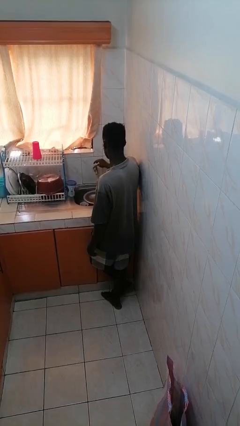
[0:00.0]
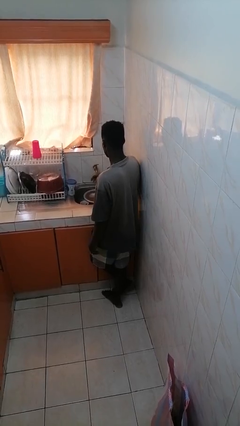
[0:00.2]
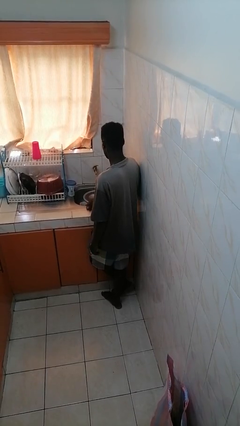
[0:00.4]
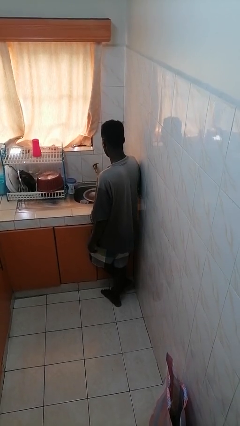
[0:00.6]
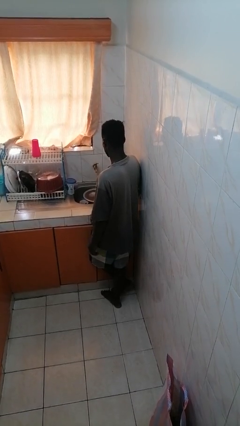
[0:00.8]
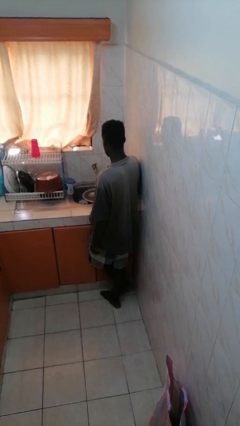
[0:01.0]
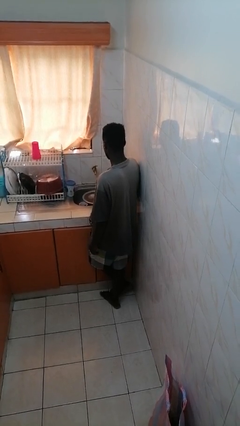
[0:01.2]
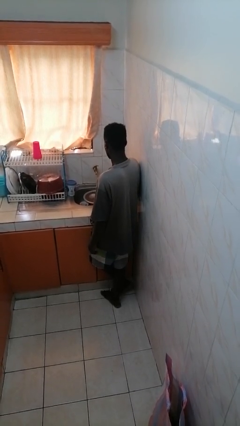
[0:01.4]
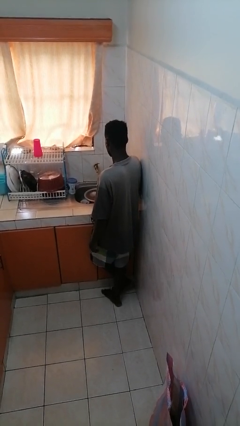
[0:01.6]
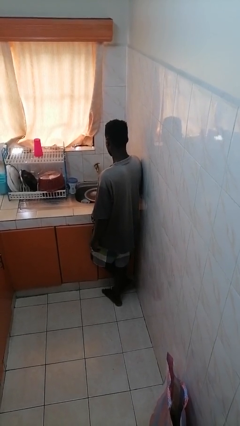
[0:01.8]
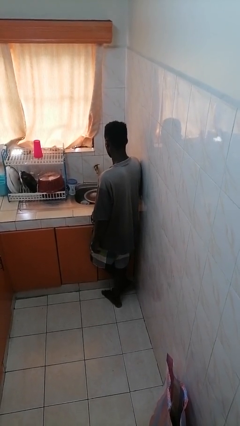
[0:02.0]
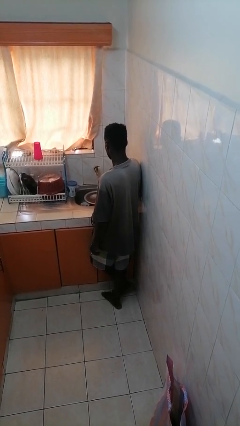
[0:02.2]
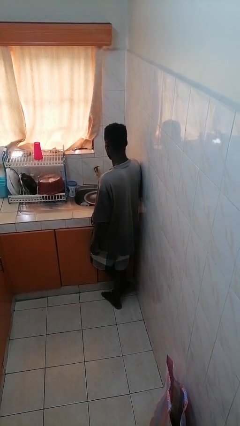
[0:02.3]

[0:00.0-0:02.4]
person turns on faucet

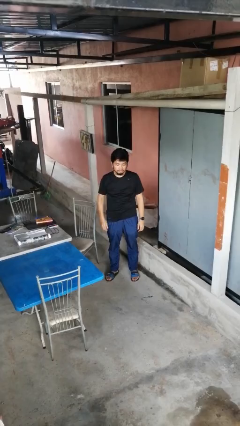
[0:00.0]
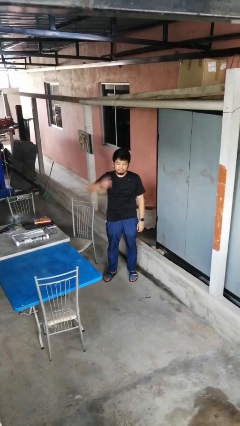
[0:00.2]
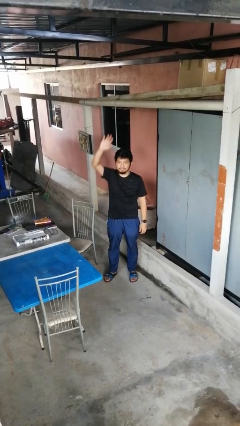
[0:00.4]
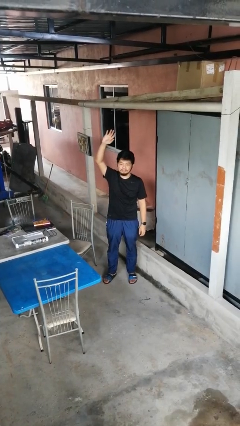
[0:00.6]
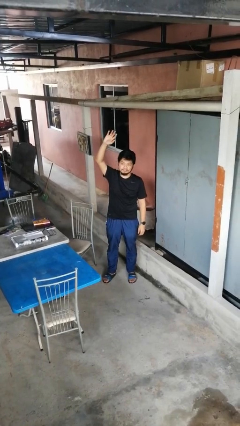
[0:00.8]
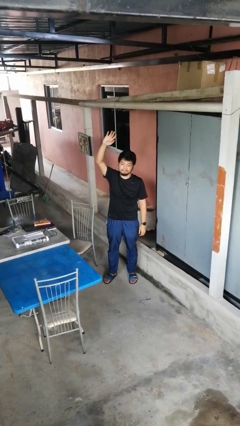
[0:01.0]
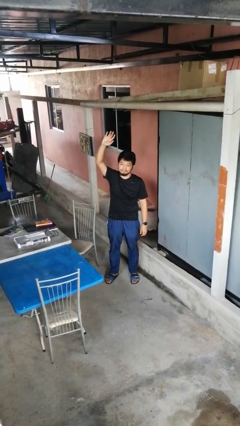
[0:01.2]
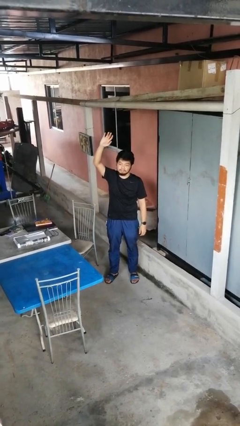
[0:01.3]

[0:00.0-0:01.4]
person gestures raise hand

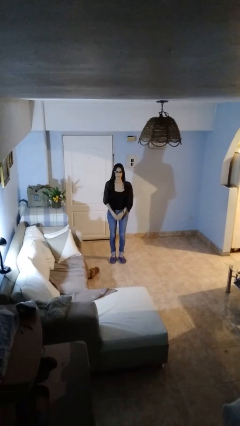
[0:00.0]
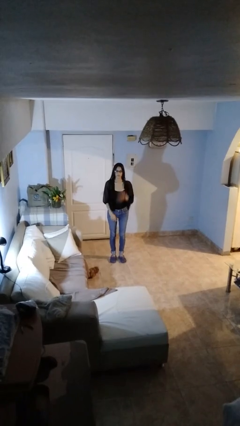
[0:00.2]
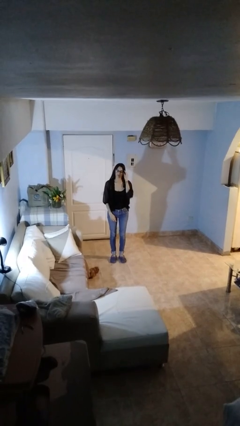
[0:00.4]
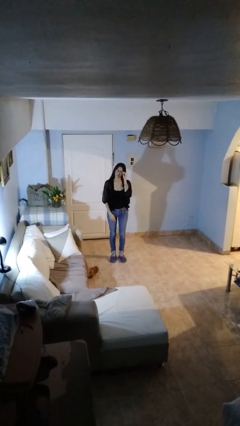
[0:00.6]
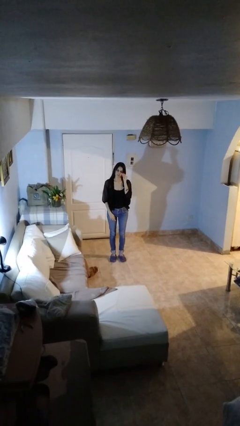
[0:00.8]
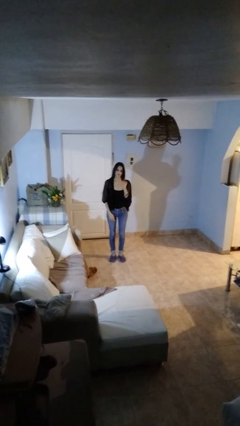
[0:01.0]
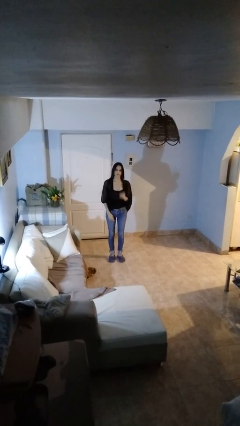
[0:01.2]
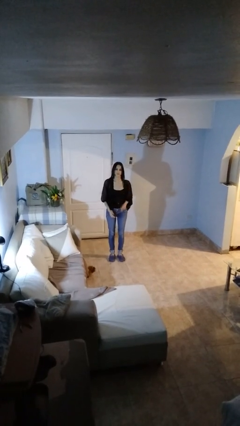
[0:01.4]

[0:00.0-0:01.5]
person takes off glasses

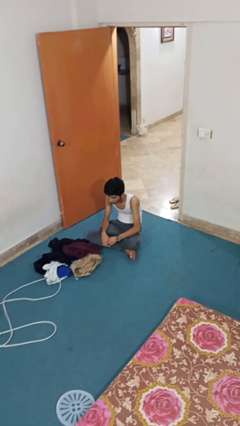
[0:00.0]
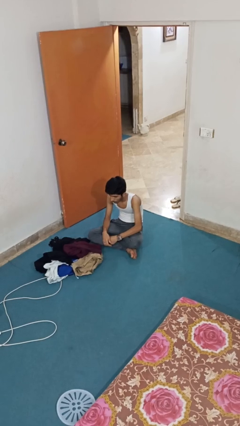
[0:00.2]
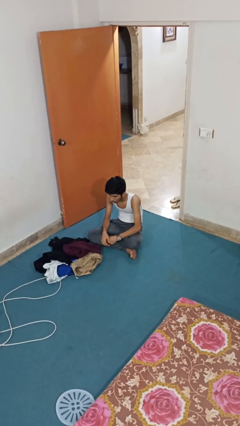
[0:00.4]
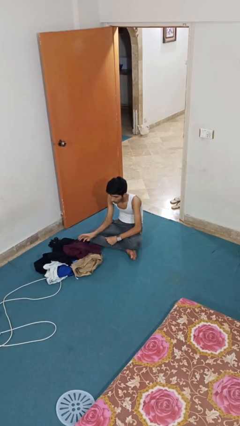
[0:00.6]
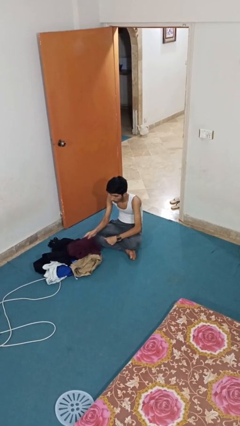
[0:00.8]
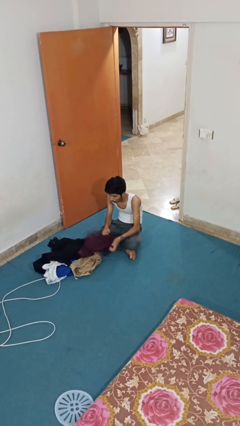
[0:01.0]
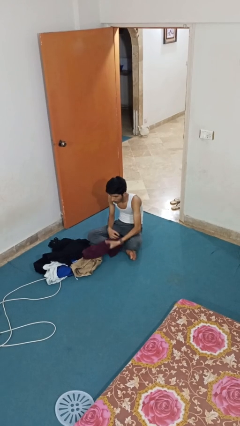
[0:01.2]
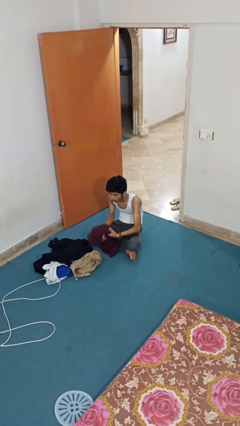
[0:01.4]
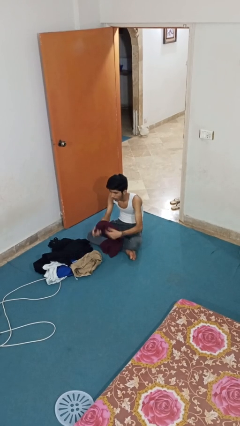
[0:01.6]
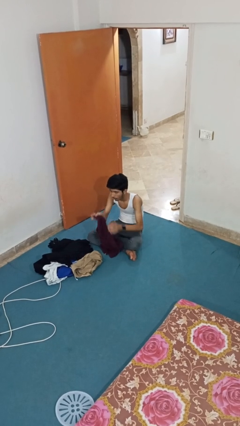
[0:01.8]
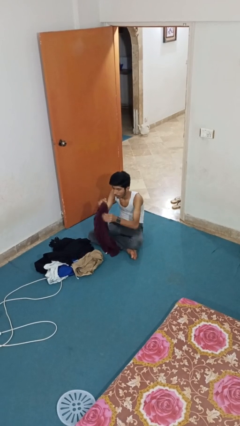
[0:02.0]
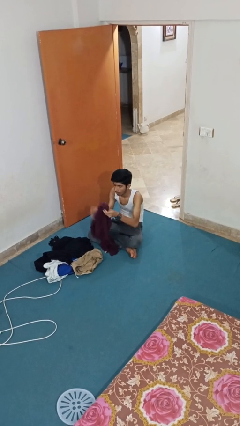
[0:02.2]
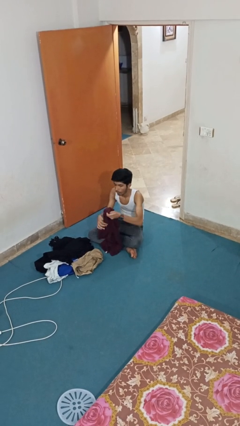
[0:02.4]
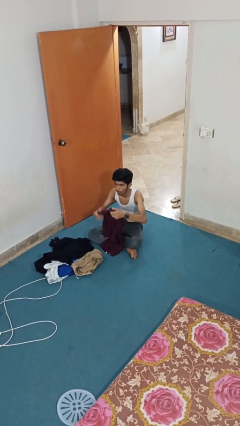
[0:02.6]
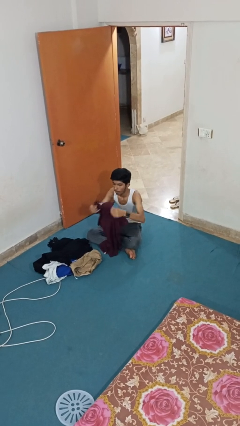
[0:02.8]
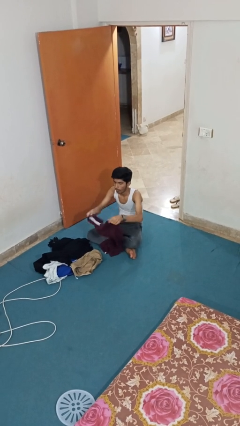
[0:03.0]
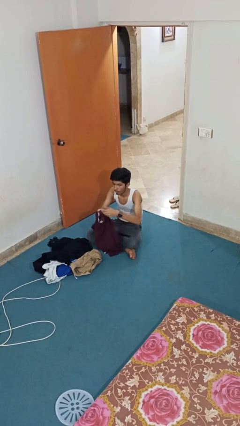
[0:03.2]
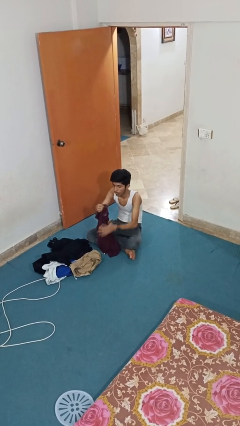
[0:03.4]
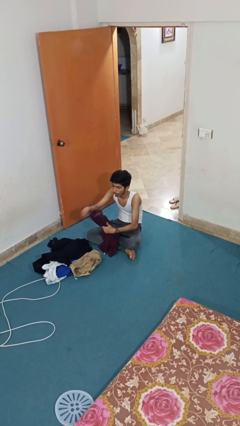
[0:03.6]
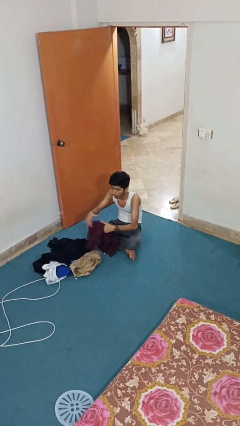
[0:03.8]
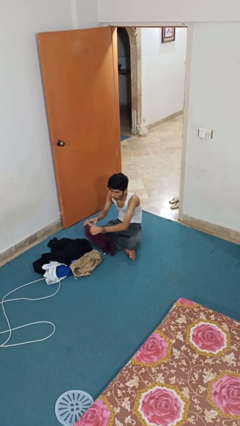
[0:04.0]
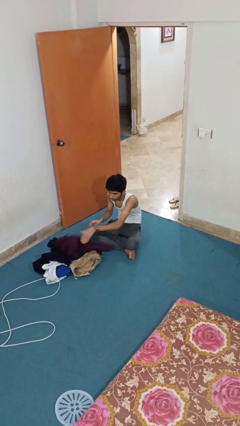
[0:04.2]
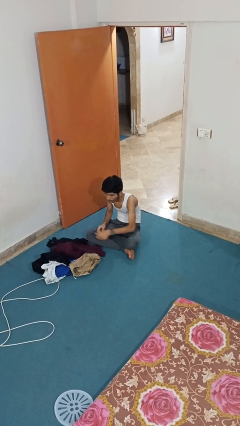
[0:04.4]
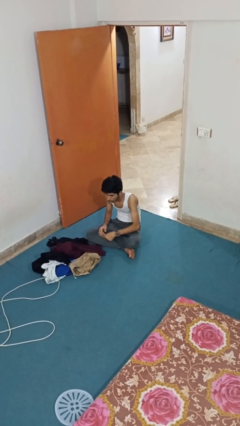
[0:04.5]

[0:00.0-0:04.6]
person folds shirt

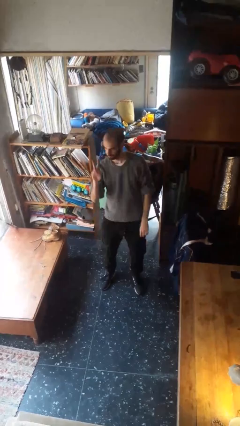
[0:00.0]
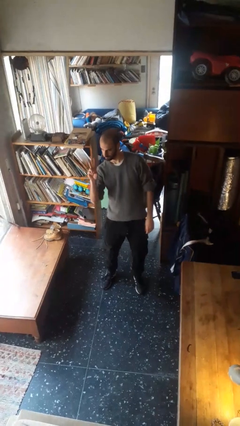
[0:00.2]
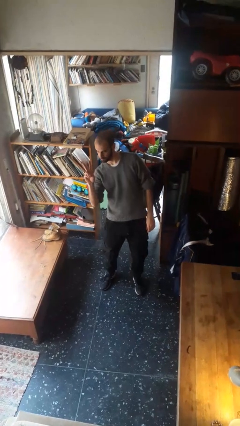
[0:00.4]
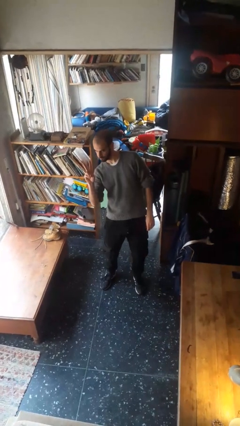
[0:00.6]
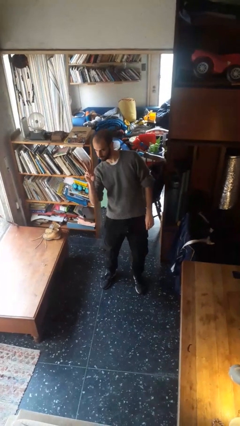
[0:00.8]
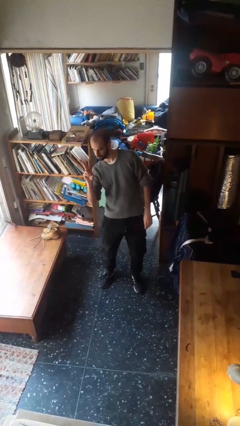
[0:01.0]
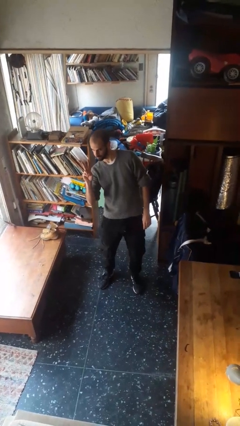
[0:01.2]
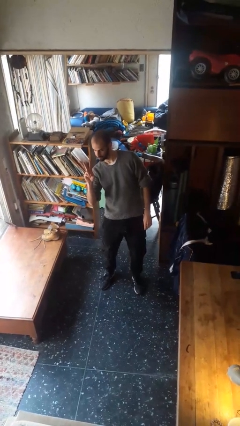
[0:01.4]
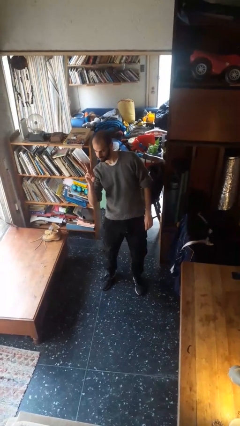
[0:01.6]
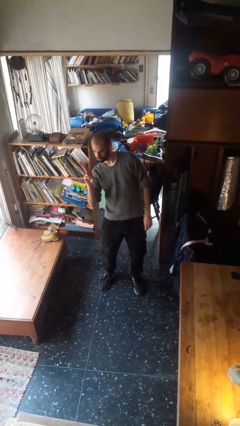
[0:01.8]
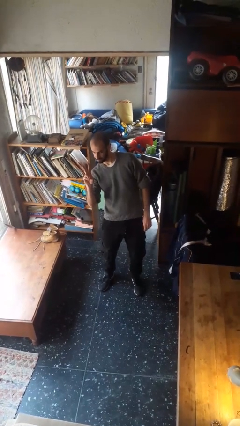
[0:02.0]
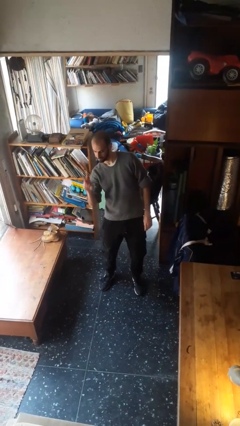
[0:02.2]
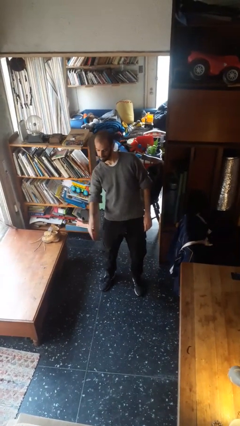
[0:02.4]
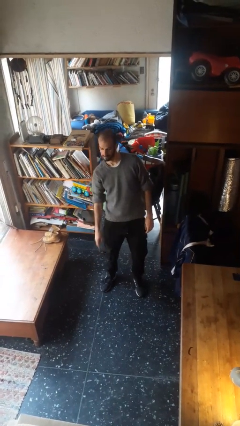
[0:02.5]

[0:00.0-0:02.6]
person gestures peace

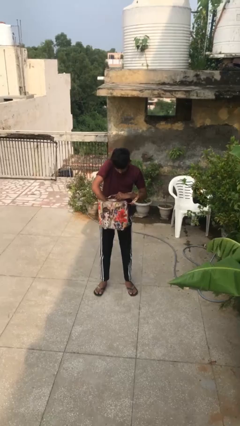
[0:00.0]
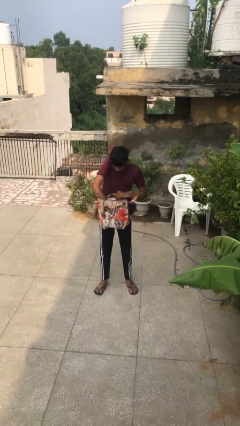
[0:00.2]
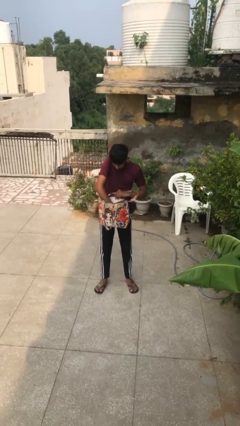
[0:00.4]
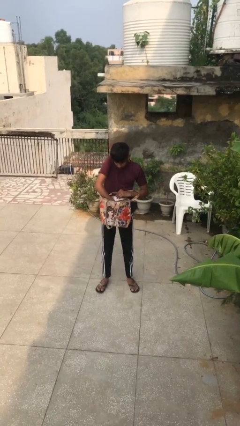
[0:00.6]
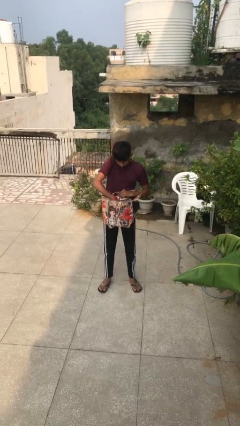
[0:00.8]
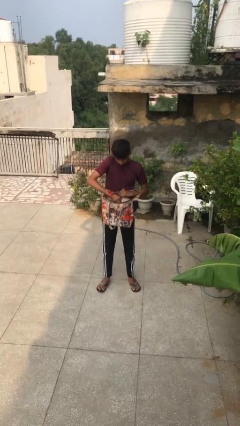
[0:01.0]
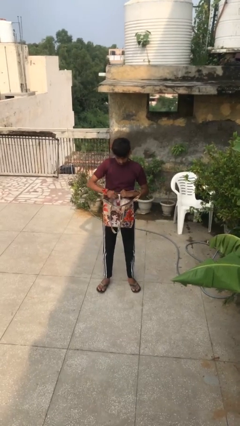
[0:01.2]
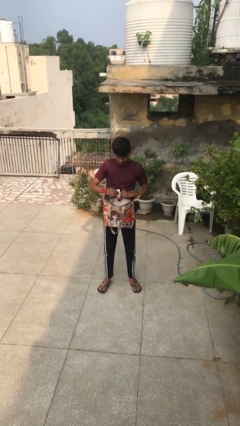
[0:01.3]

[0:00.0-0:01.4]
person searches in purse

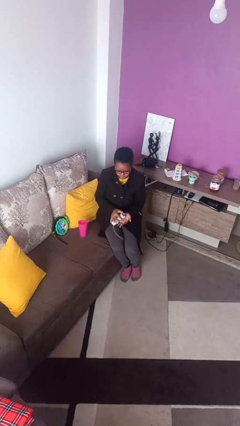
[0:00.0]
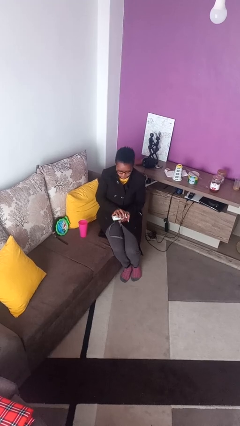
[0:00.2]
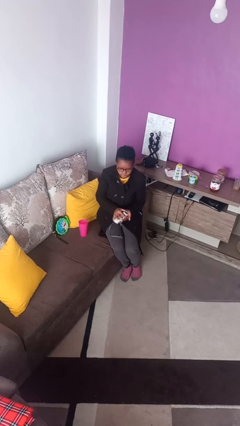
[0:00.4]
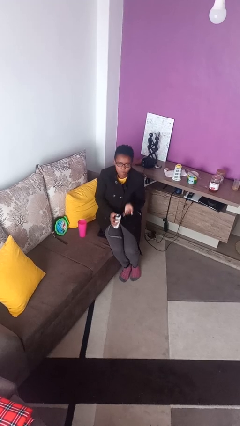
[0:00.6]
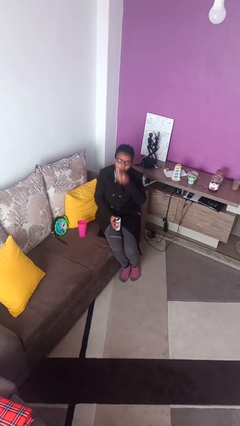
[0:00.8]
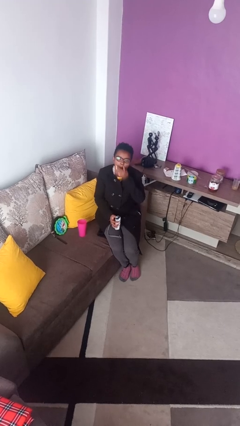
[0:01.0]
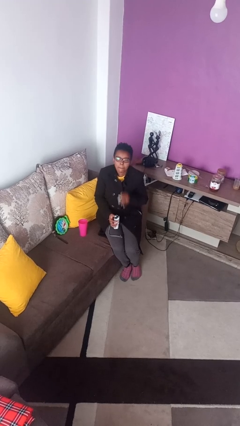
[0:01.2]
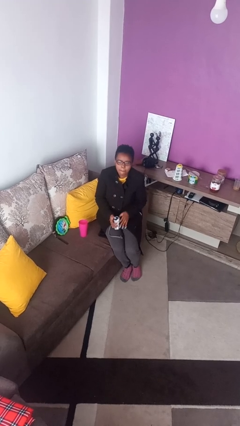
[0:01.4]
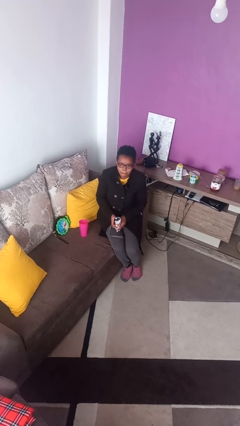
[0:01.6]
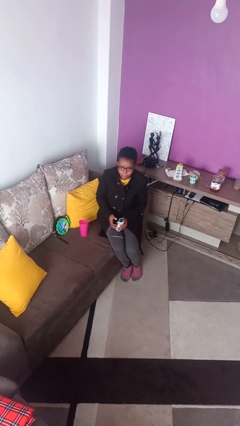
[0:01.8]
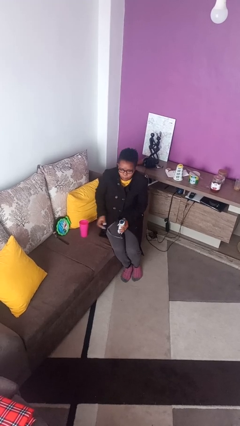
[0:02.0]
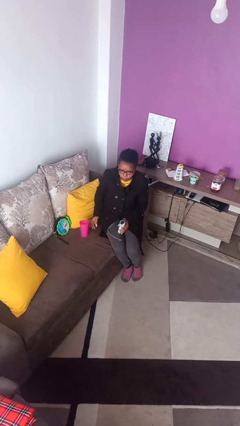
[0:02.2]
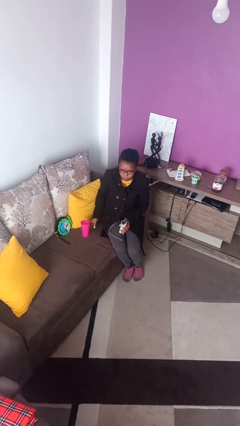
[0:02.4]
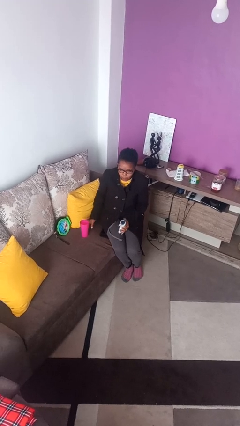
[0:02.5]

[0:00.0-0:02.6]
person takes medicine pills

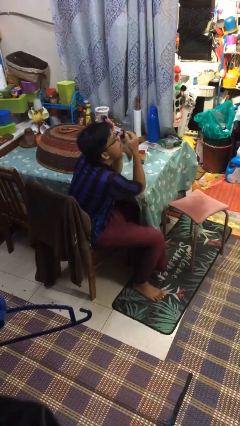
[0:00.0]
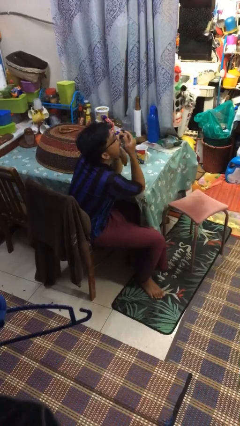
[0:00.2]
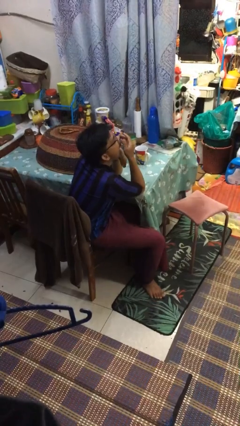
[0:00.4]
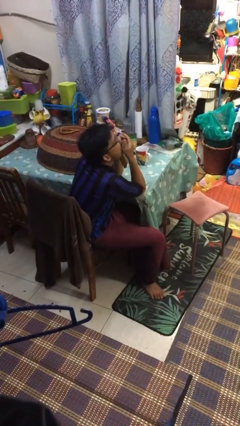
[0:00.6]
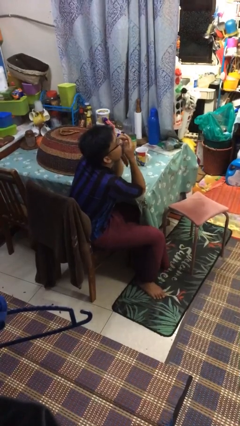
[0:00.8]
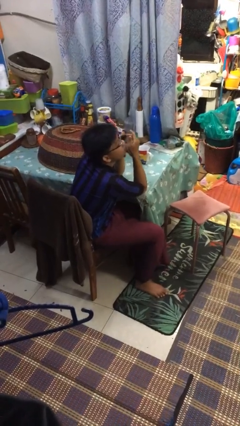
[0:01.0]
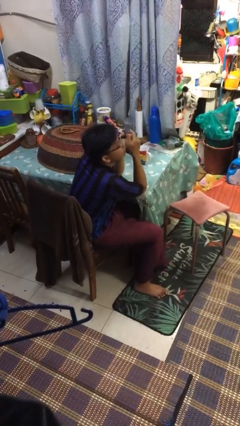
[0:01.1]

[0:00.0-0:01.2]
person yawns
